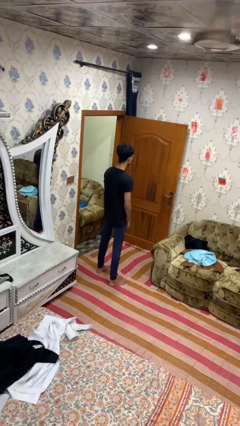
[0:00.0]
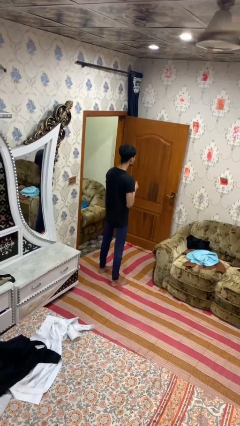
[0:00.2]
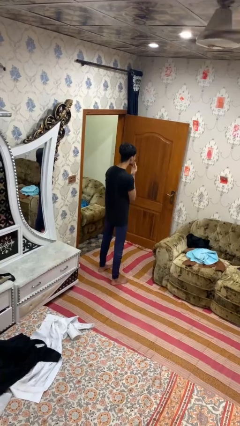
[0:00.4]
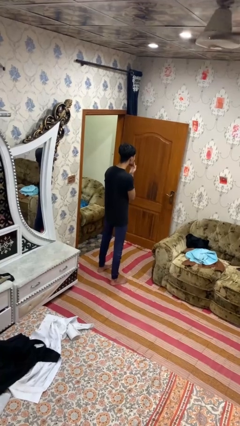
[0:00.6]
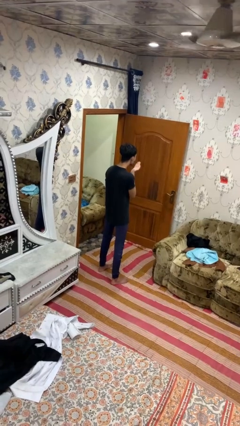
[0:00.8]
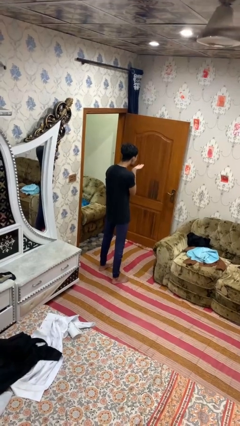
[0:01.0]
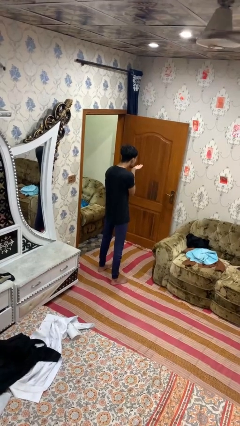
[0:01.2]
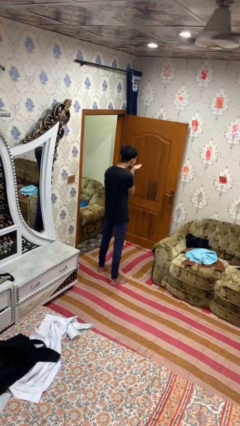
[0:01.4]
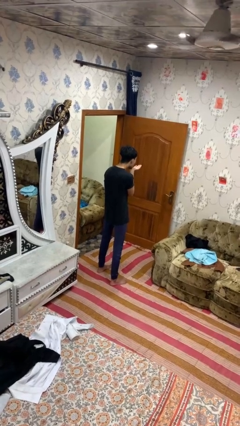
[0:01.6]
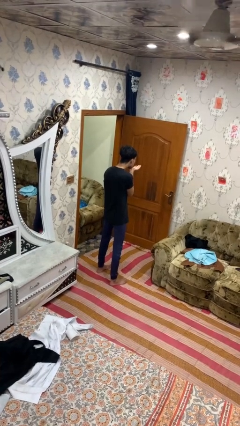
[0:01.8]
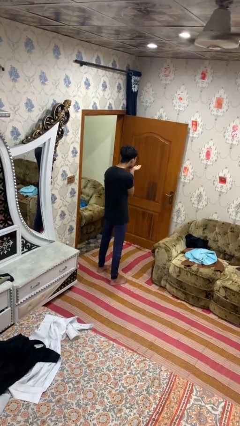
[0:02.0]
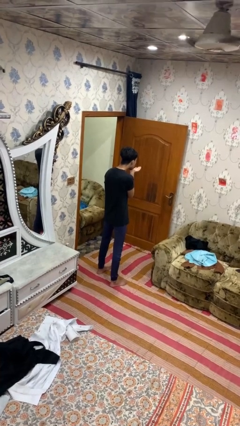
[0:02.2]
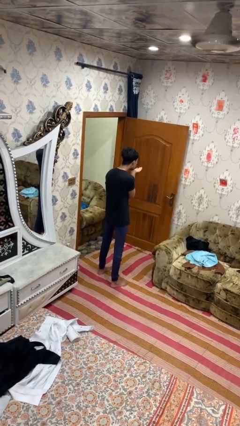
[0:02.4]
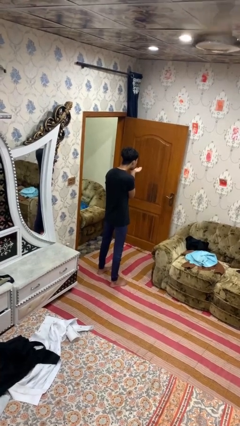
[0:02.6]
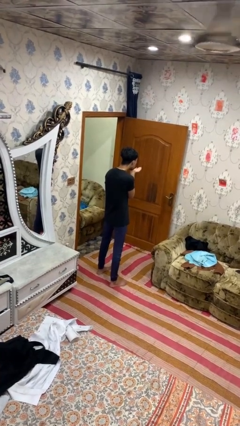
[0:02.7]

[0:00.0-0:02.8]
person gestures blow kiss

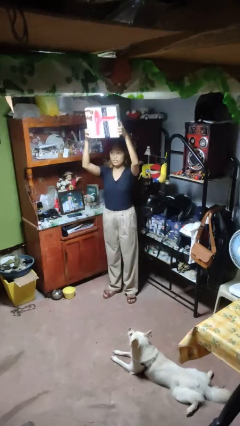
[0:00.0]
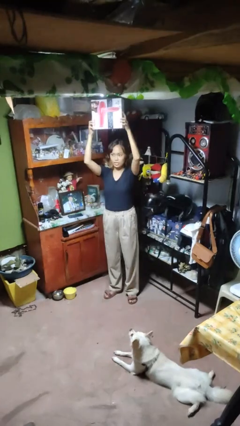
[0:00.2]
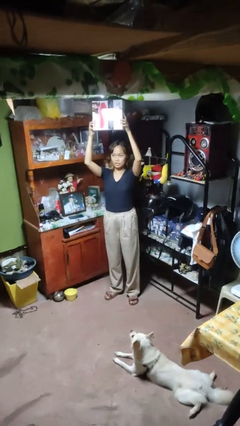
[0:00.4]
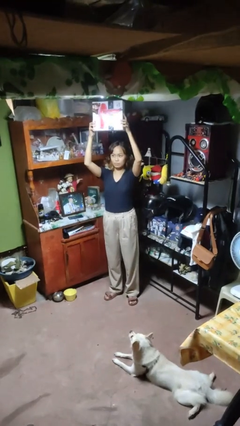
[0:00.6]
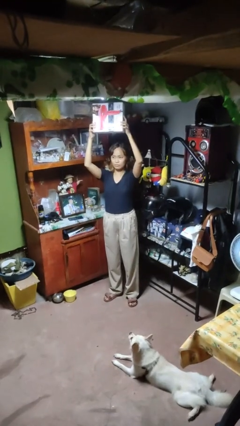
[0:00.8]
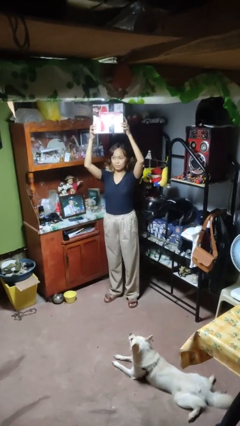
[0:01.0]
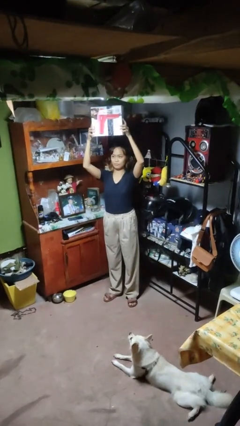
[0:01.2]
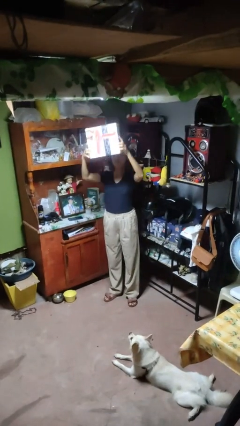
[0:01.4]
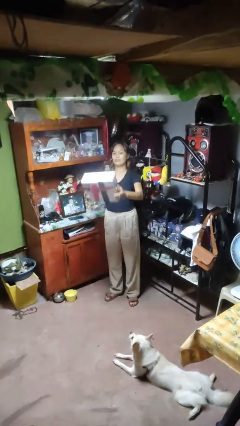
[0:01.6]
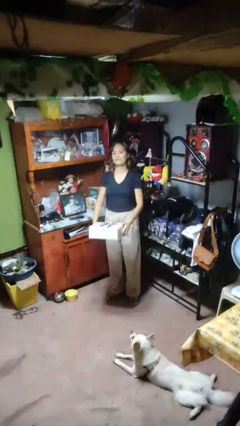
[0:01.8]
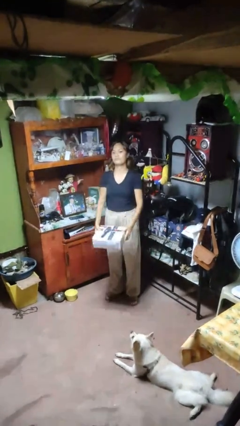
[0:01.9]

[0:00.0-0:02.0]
person holds object above head

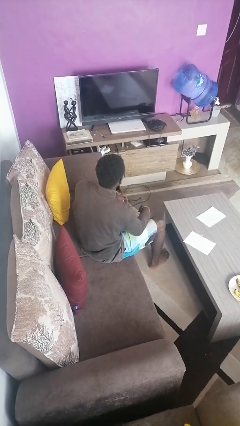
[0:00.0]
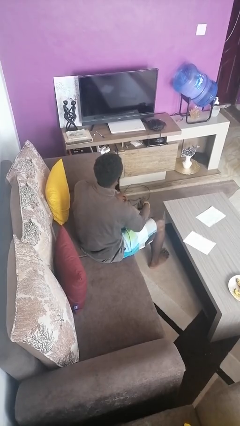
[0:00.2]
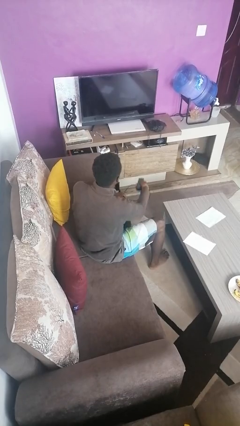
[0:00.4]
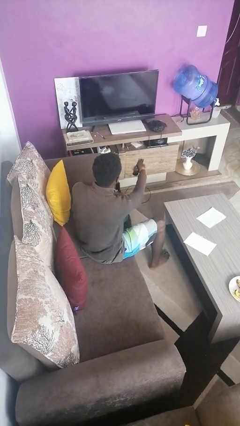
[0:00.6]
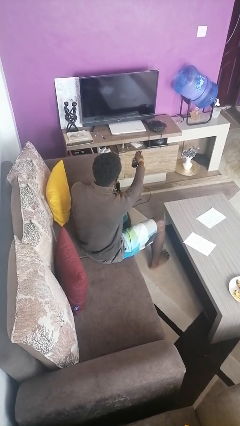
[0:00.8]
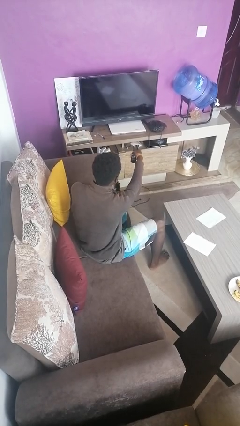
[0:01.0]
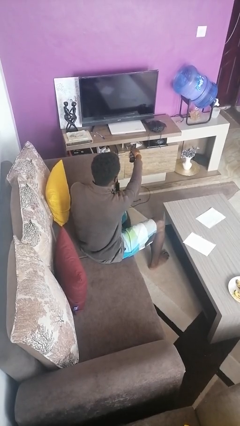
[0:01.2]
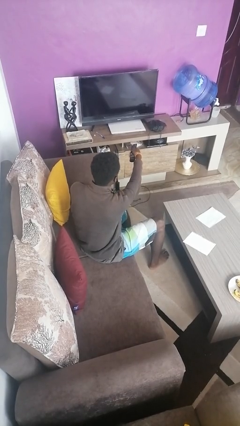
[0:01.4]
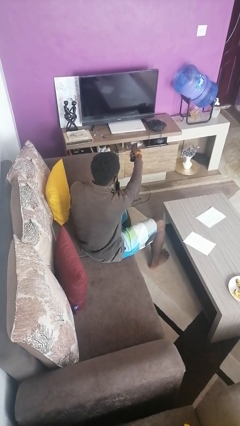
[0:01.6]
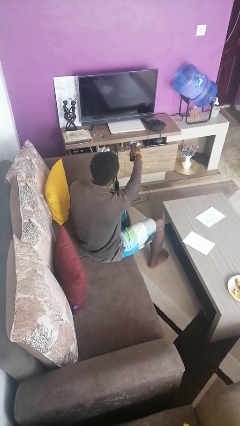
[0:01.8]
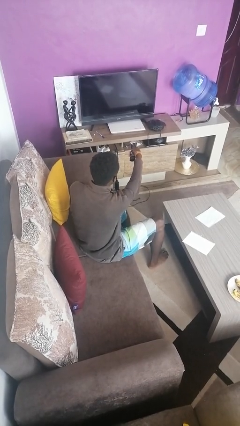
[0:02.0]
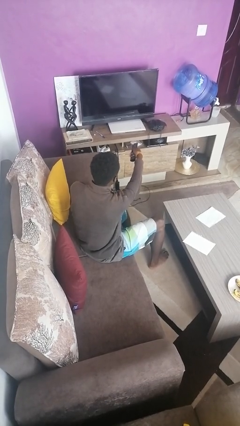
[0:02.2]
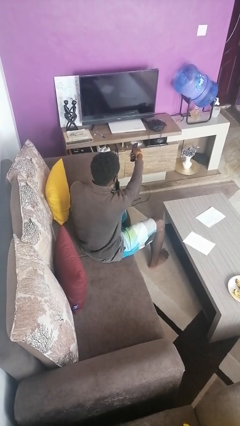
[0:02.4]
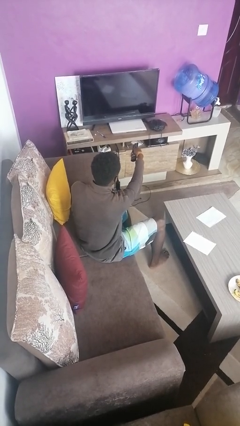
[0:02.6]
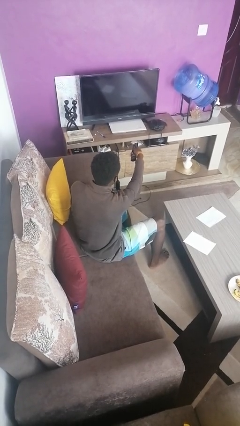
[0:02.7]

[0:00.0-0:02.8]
person uses television remote

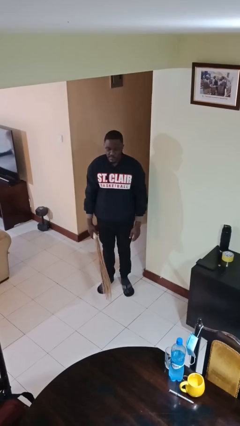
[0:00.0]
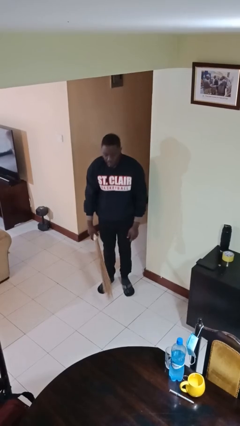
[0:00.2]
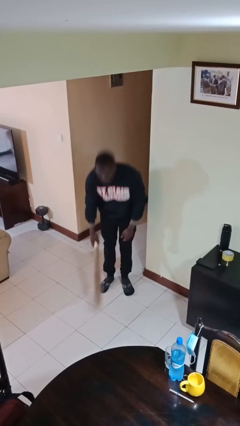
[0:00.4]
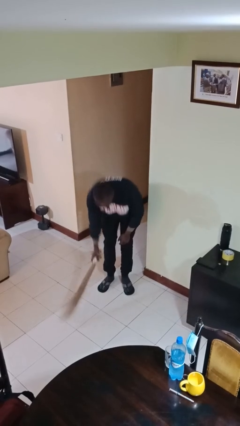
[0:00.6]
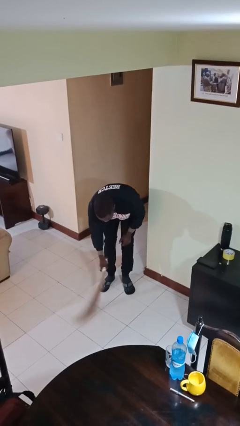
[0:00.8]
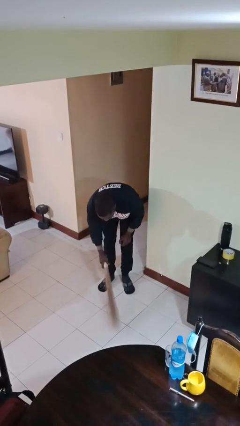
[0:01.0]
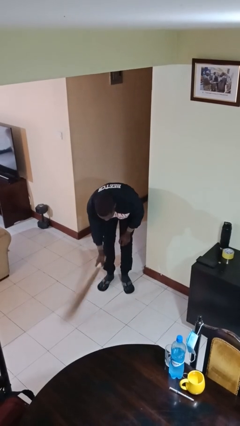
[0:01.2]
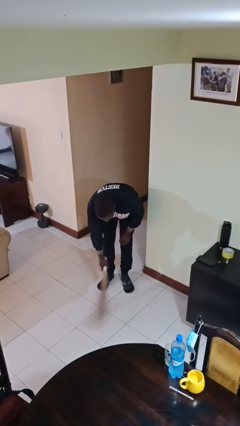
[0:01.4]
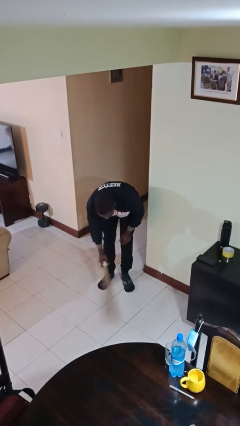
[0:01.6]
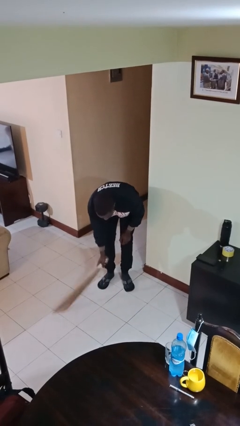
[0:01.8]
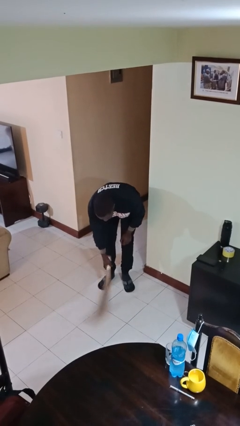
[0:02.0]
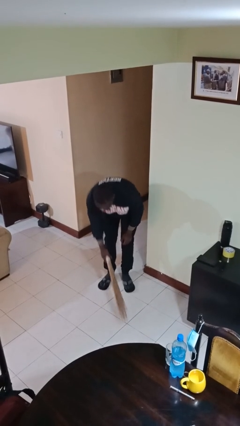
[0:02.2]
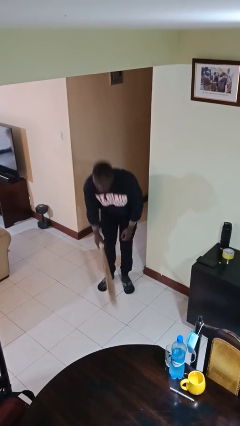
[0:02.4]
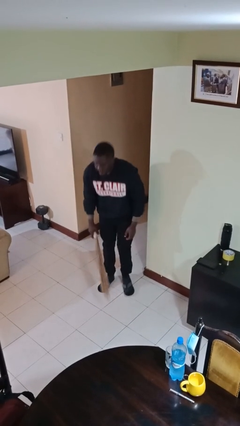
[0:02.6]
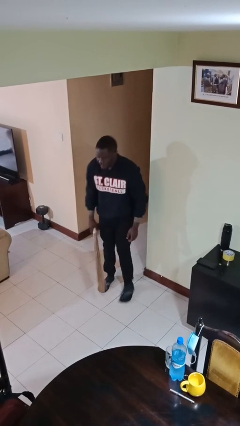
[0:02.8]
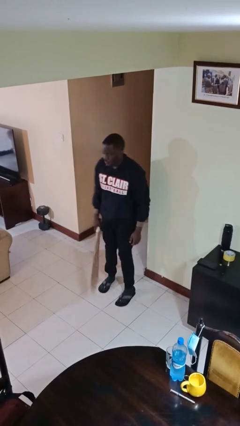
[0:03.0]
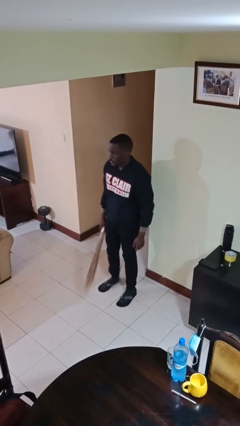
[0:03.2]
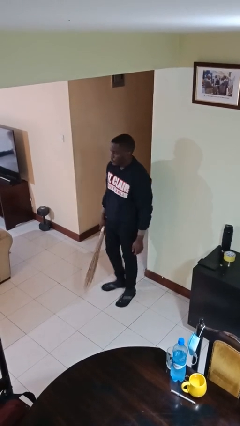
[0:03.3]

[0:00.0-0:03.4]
person sweeps floor

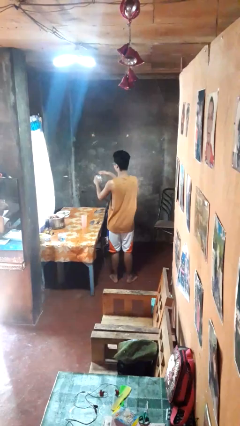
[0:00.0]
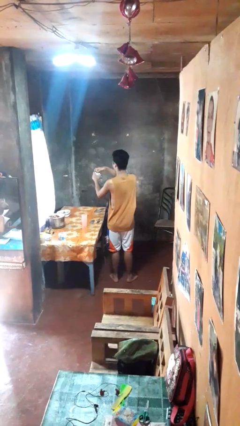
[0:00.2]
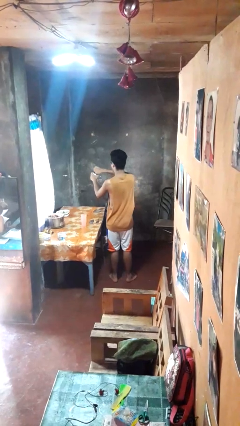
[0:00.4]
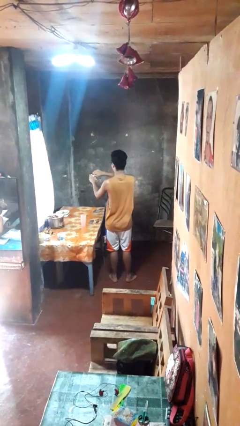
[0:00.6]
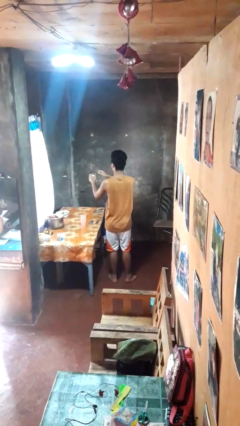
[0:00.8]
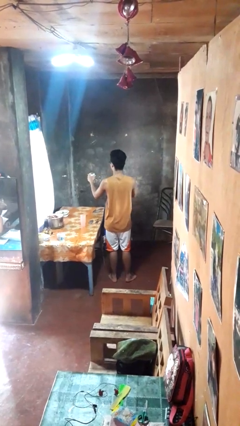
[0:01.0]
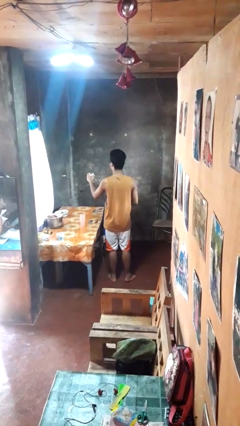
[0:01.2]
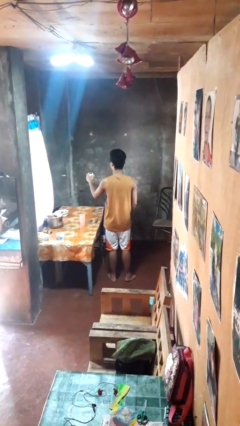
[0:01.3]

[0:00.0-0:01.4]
person opens beverage can

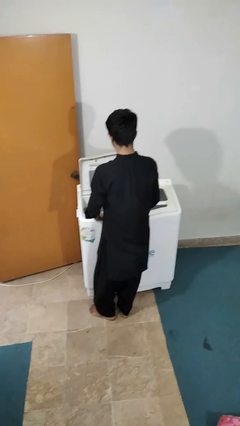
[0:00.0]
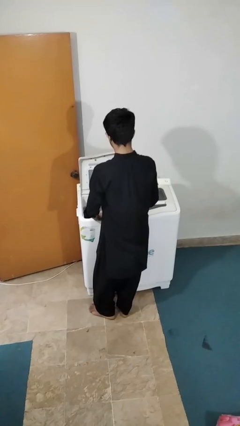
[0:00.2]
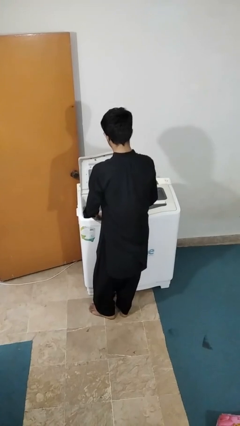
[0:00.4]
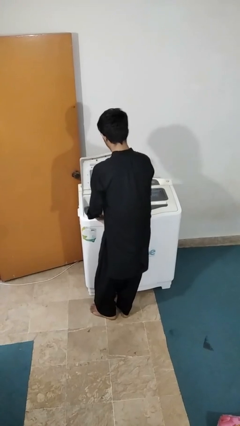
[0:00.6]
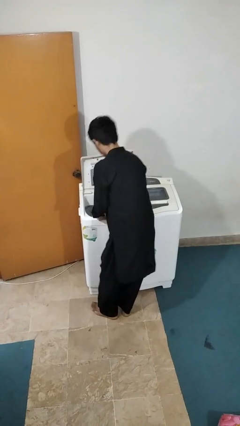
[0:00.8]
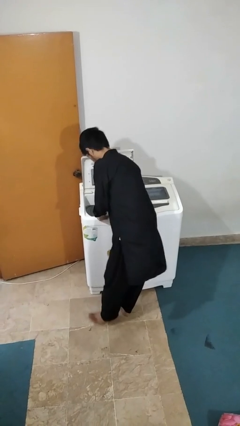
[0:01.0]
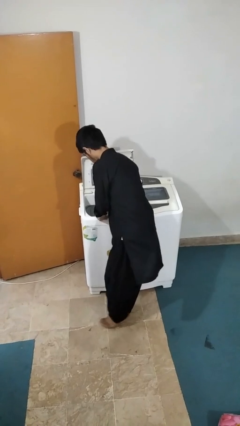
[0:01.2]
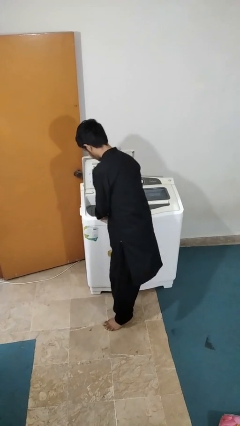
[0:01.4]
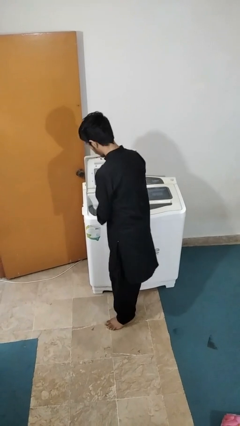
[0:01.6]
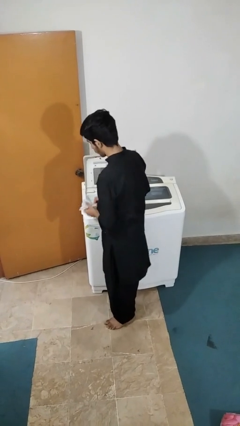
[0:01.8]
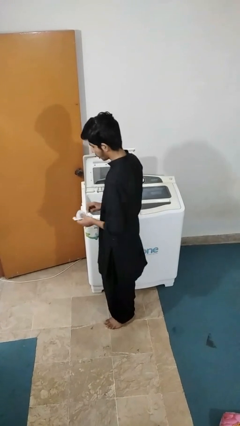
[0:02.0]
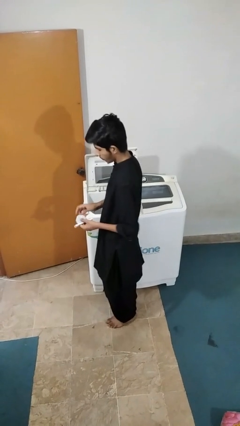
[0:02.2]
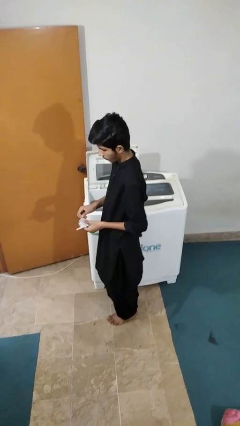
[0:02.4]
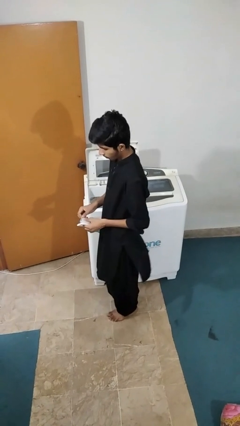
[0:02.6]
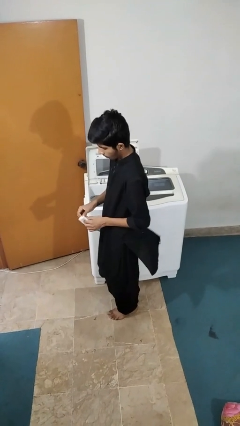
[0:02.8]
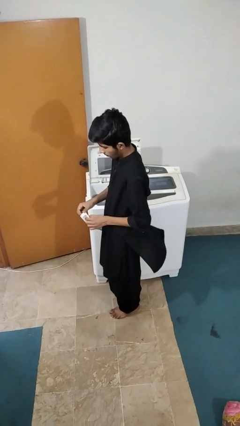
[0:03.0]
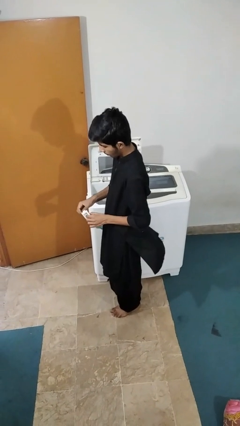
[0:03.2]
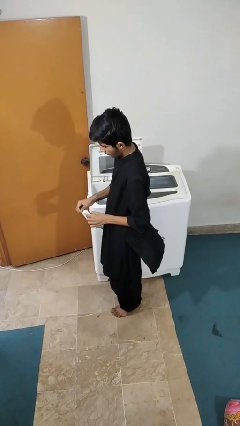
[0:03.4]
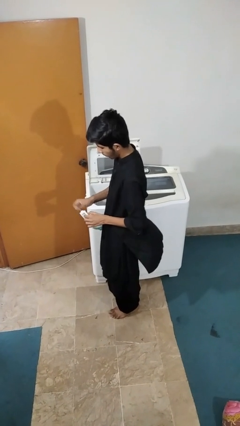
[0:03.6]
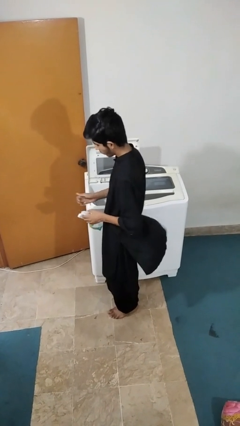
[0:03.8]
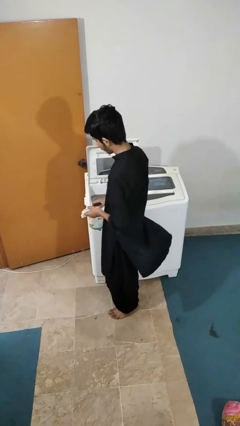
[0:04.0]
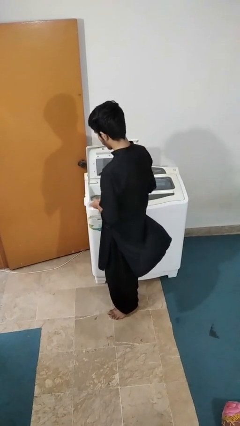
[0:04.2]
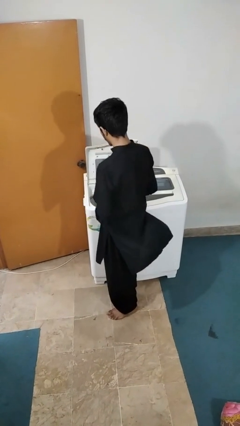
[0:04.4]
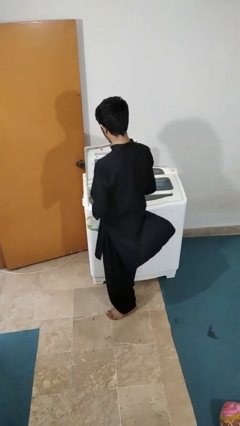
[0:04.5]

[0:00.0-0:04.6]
person cleans dryer lint trap

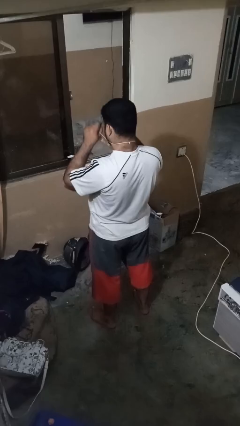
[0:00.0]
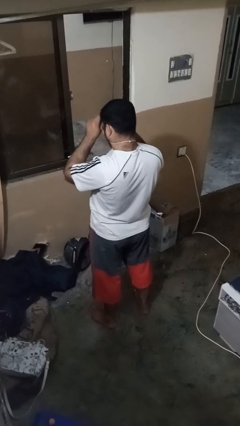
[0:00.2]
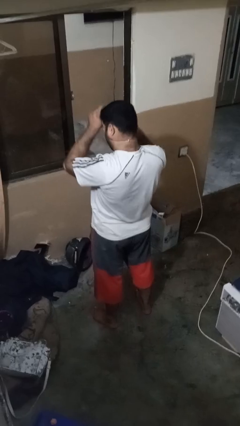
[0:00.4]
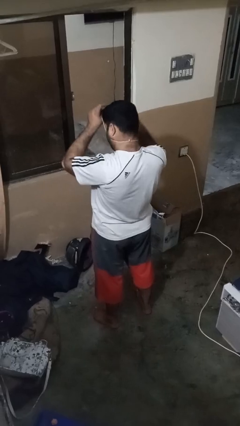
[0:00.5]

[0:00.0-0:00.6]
person puts on necklace
